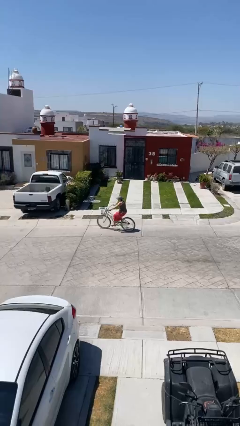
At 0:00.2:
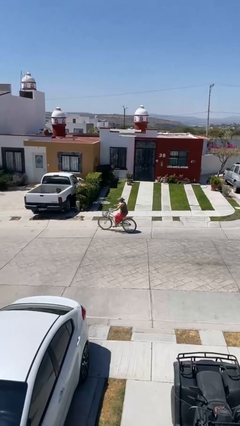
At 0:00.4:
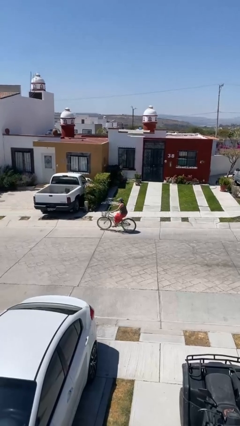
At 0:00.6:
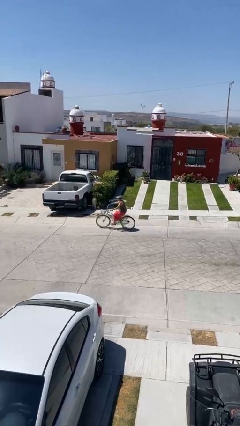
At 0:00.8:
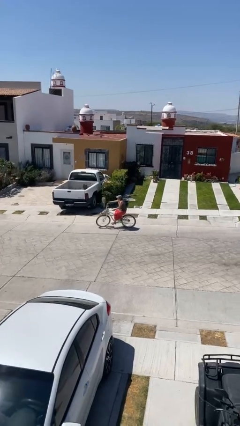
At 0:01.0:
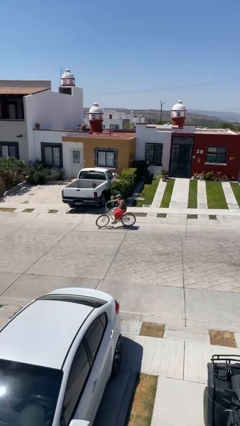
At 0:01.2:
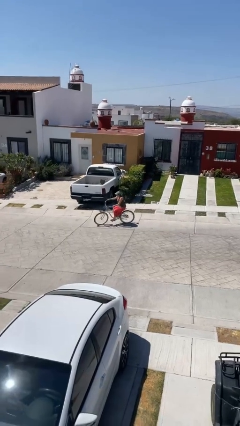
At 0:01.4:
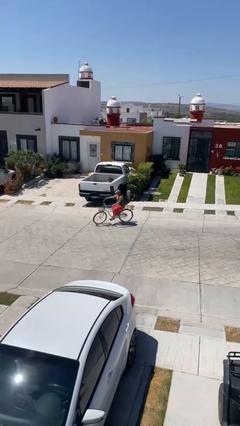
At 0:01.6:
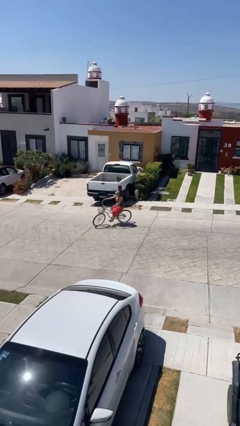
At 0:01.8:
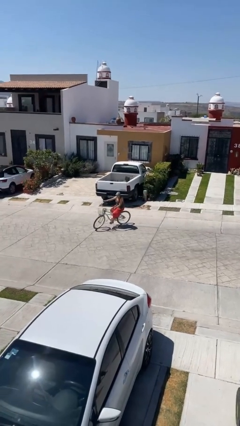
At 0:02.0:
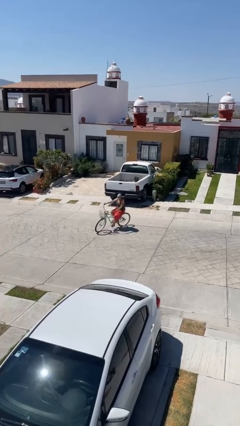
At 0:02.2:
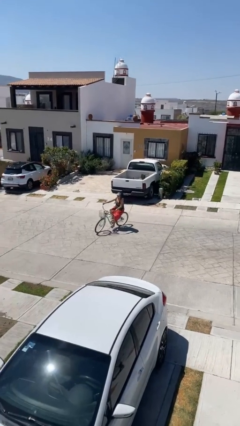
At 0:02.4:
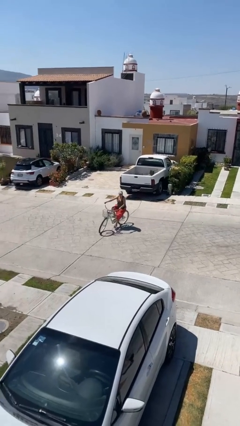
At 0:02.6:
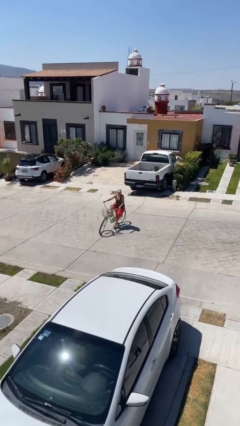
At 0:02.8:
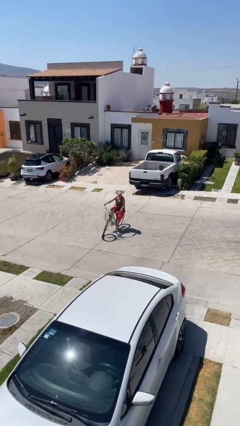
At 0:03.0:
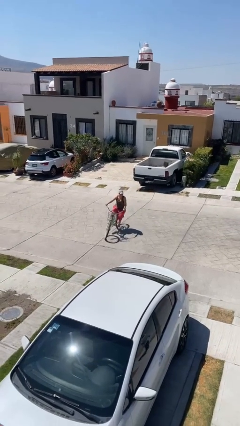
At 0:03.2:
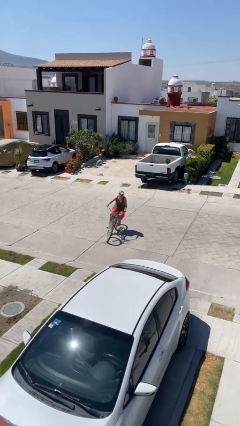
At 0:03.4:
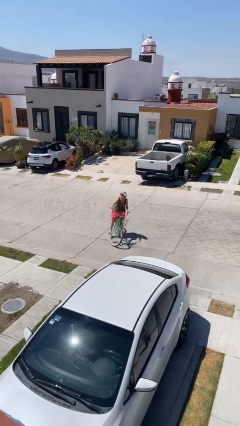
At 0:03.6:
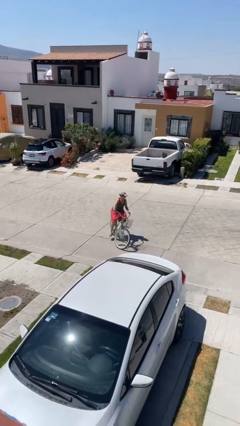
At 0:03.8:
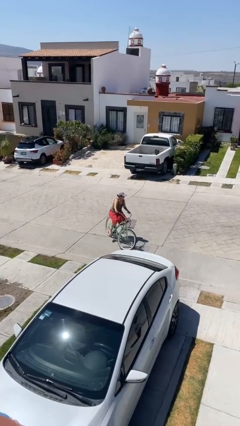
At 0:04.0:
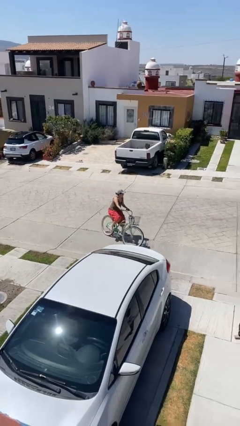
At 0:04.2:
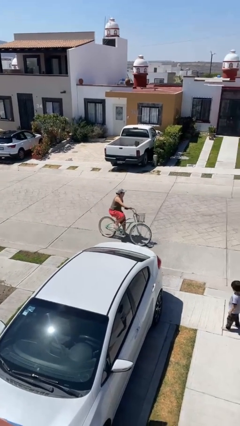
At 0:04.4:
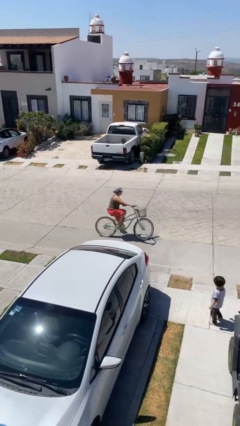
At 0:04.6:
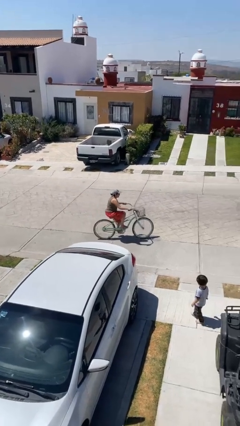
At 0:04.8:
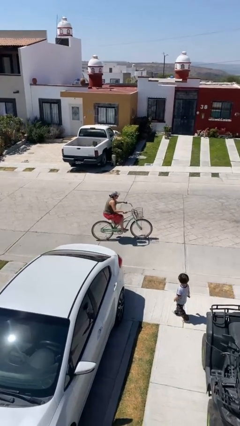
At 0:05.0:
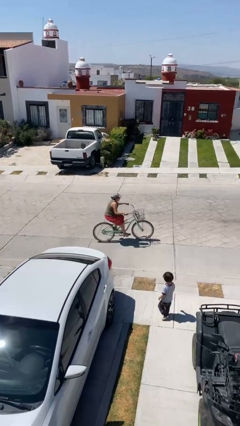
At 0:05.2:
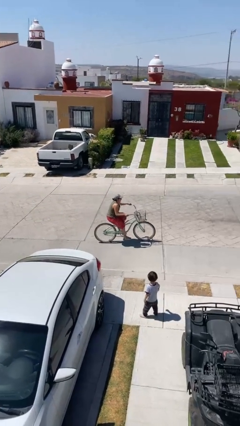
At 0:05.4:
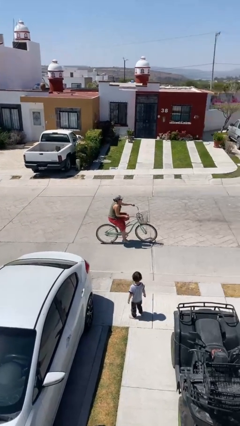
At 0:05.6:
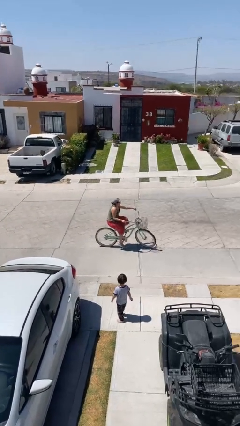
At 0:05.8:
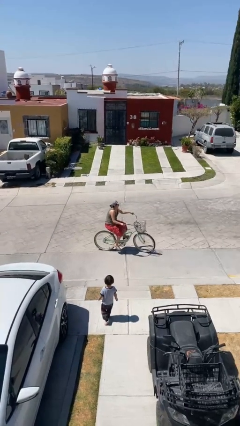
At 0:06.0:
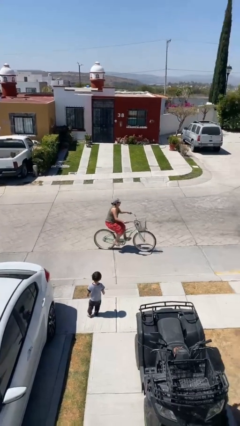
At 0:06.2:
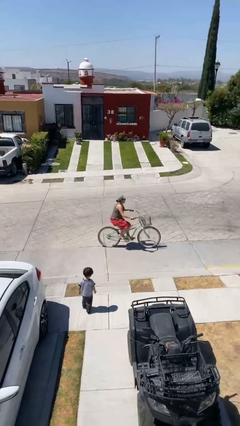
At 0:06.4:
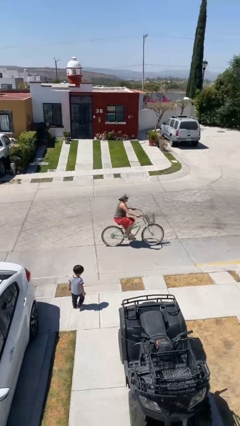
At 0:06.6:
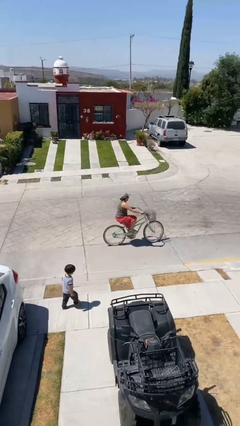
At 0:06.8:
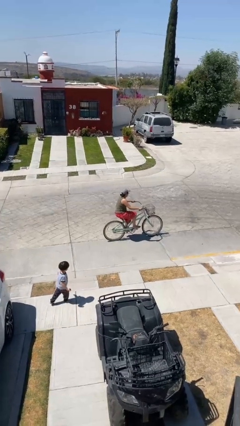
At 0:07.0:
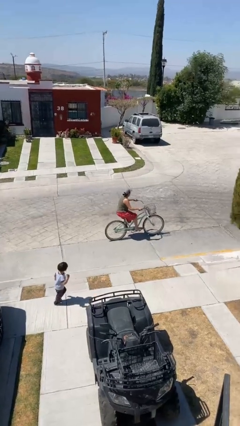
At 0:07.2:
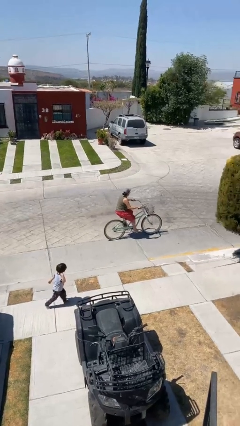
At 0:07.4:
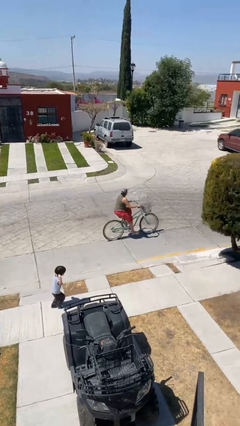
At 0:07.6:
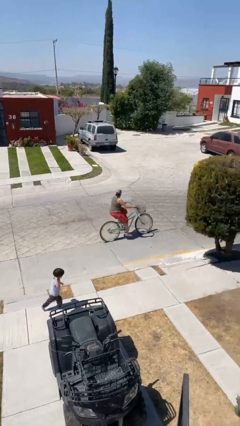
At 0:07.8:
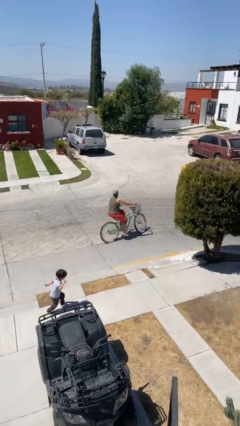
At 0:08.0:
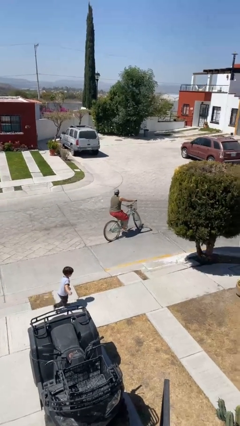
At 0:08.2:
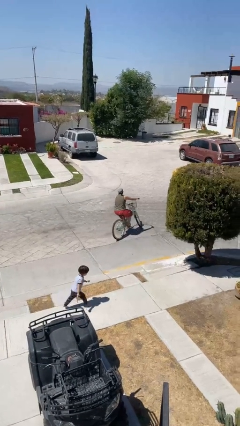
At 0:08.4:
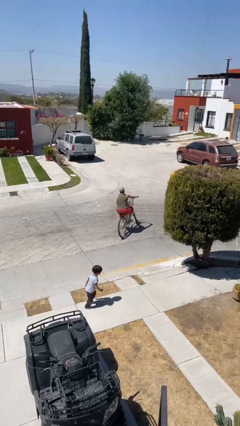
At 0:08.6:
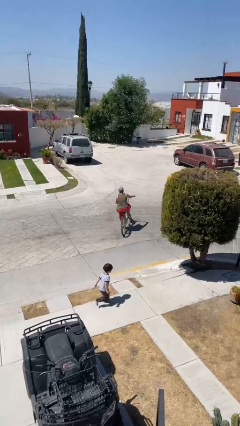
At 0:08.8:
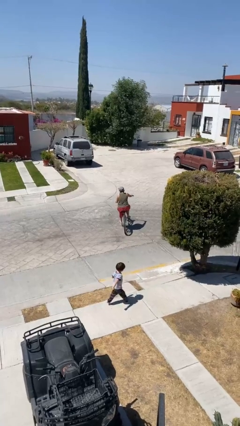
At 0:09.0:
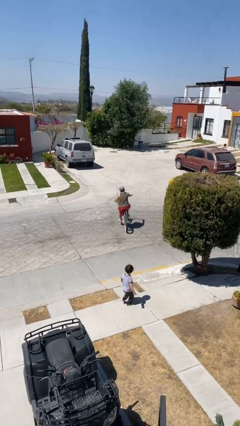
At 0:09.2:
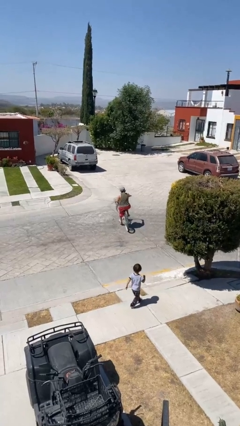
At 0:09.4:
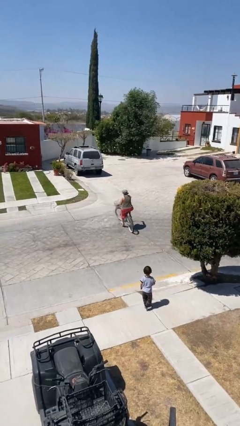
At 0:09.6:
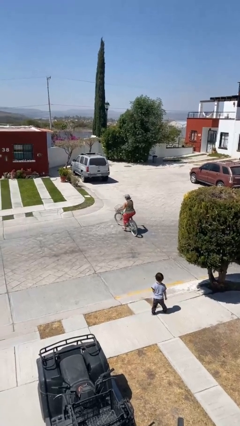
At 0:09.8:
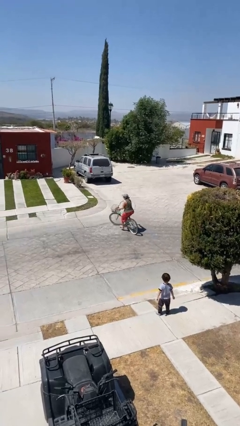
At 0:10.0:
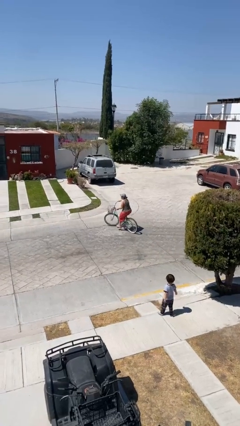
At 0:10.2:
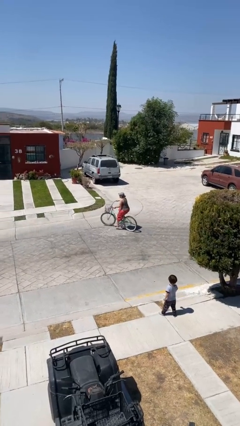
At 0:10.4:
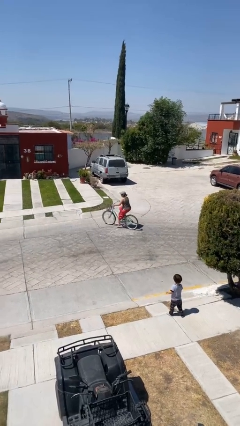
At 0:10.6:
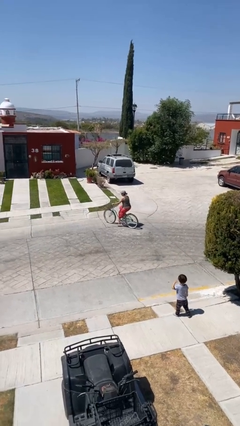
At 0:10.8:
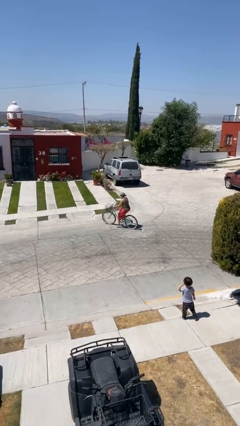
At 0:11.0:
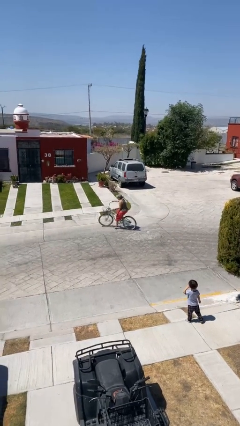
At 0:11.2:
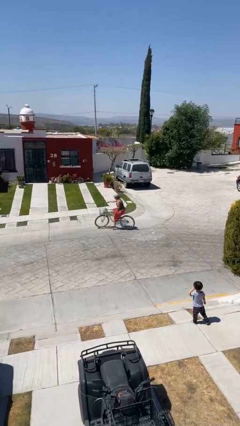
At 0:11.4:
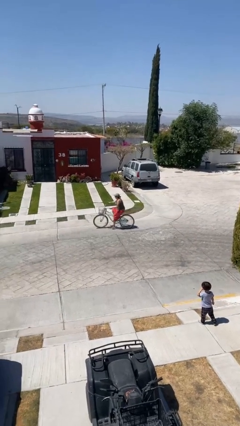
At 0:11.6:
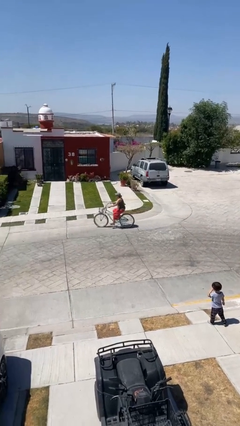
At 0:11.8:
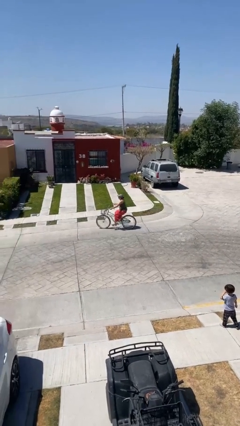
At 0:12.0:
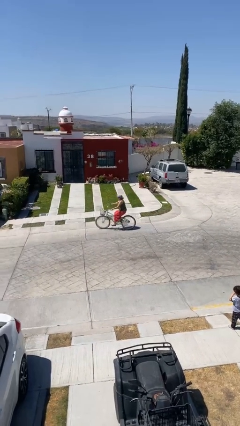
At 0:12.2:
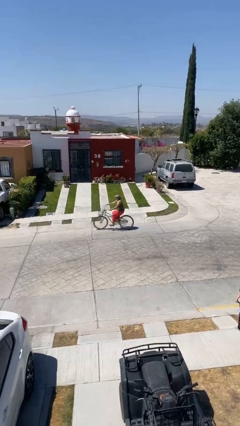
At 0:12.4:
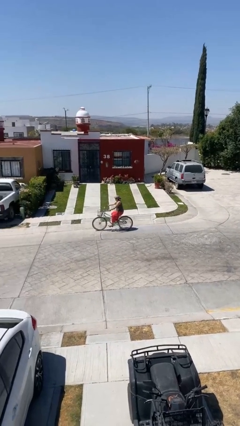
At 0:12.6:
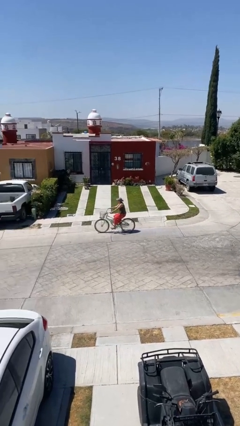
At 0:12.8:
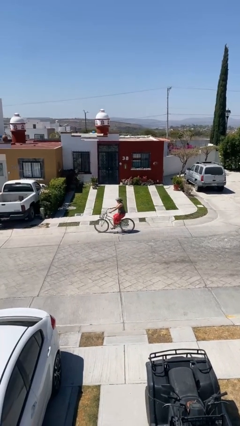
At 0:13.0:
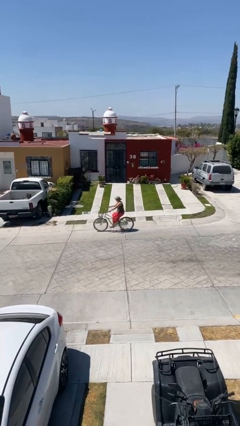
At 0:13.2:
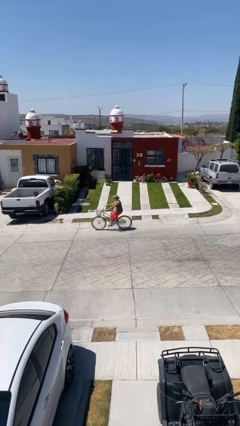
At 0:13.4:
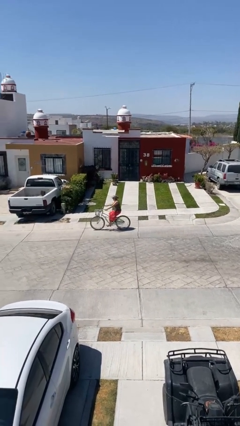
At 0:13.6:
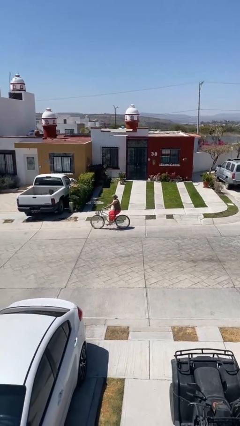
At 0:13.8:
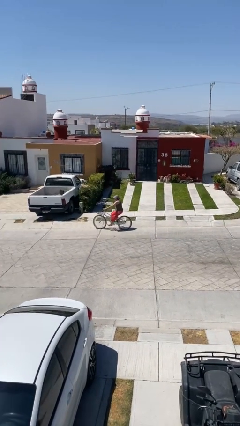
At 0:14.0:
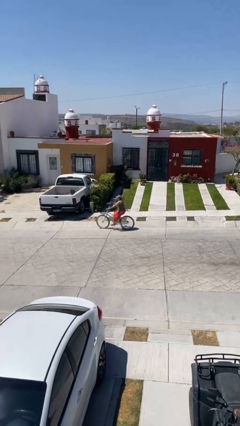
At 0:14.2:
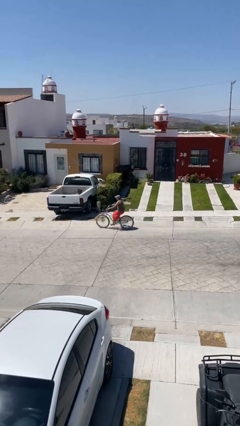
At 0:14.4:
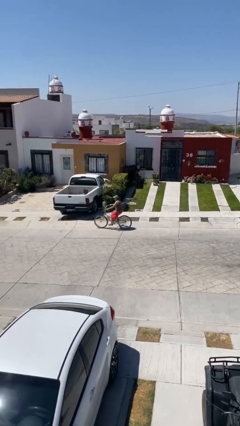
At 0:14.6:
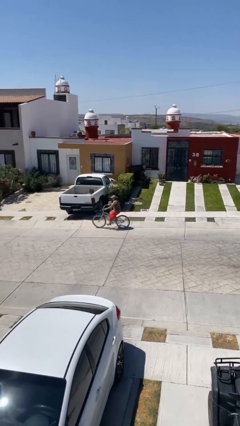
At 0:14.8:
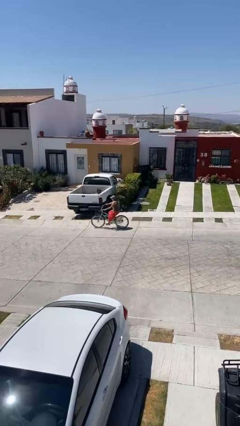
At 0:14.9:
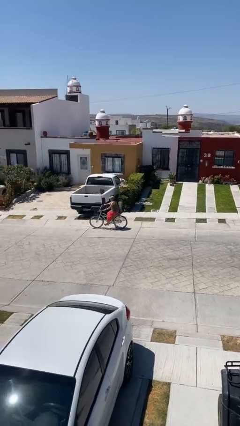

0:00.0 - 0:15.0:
person rides bicycle

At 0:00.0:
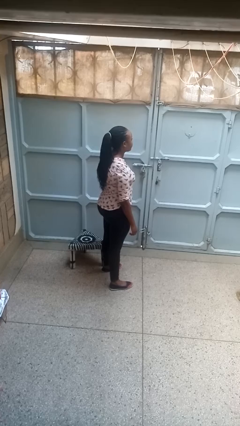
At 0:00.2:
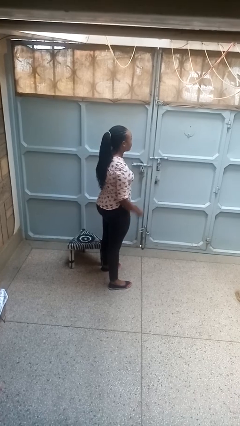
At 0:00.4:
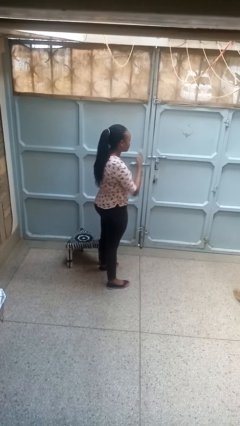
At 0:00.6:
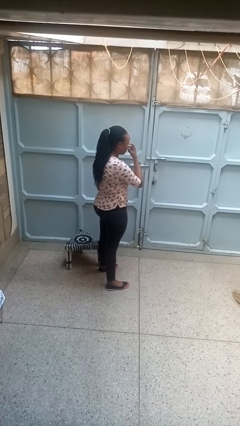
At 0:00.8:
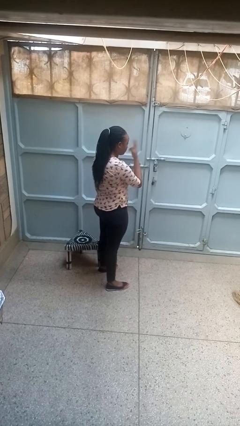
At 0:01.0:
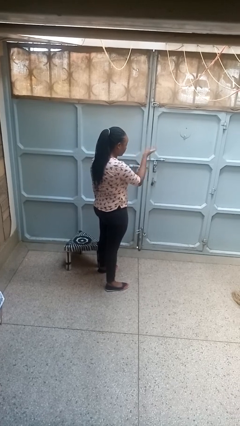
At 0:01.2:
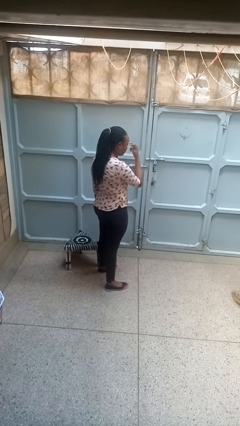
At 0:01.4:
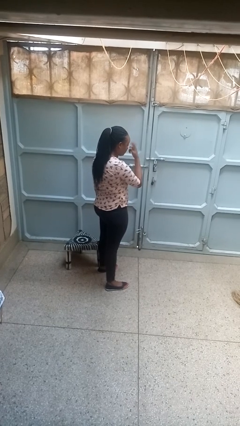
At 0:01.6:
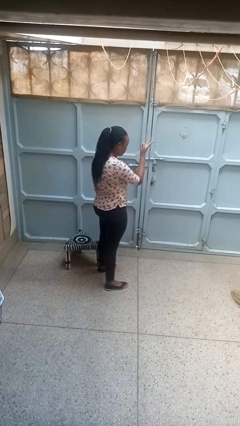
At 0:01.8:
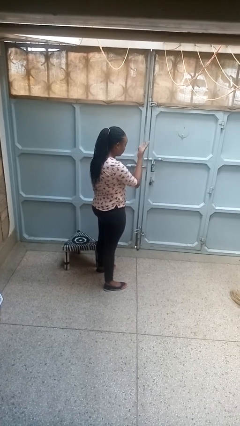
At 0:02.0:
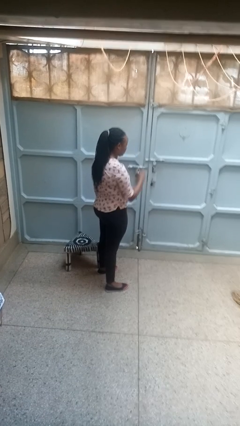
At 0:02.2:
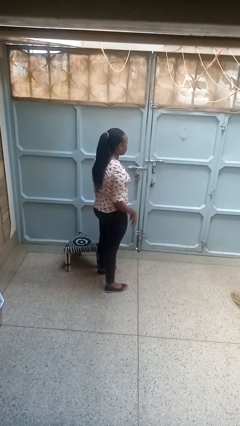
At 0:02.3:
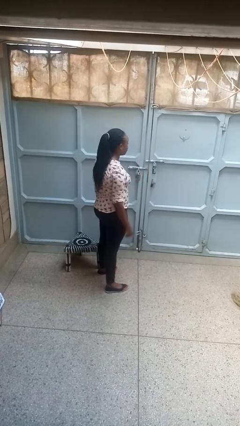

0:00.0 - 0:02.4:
person gestures watch closely

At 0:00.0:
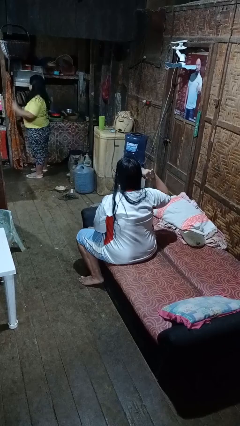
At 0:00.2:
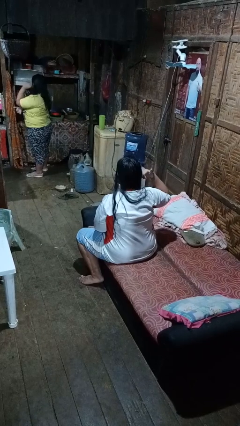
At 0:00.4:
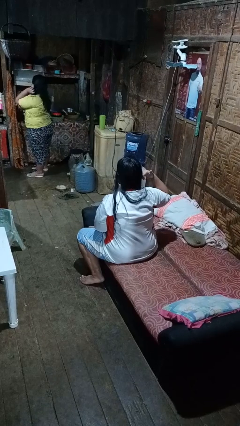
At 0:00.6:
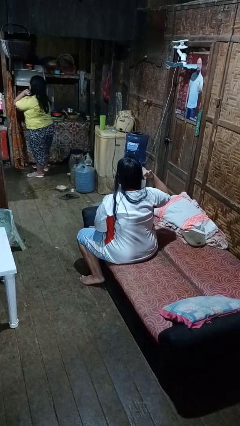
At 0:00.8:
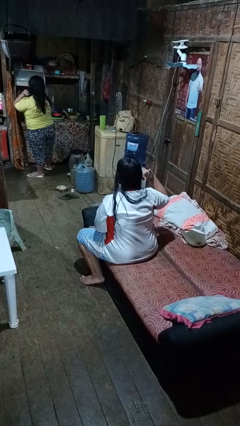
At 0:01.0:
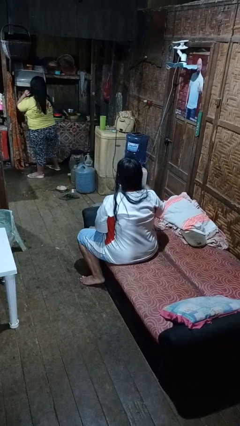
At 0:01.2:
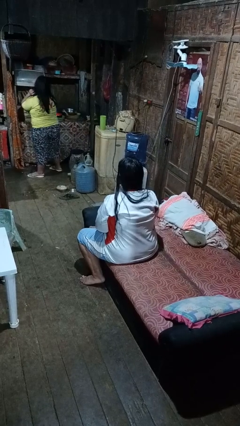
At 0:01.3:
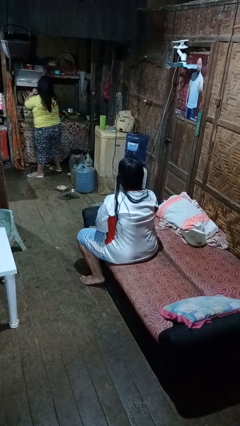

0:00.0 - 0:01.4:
person gestures call me
